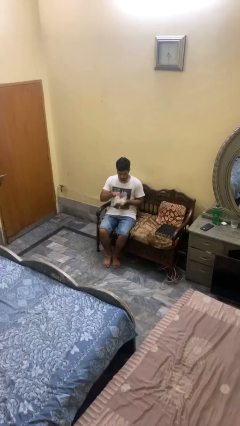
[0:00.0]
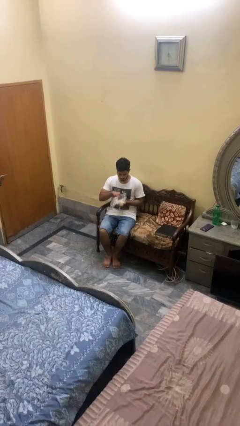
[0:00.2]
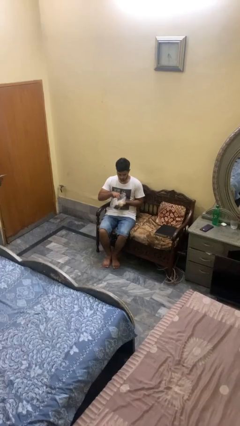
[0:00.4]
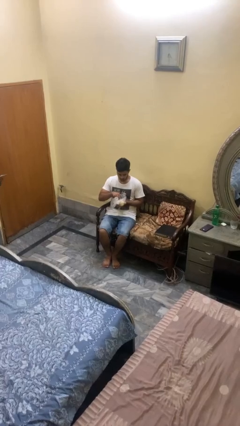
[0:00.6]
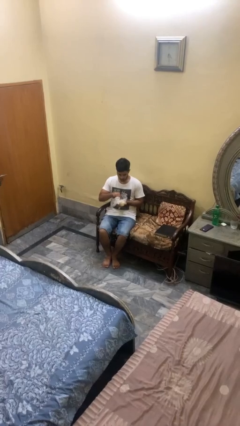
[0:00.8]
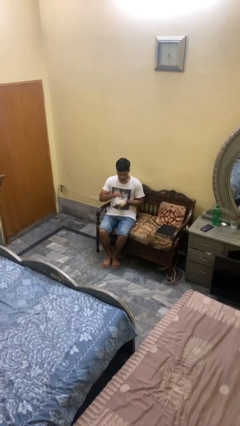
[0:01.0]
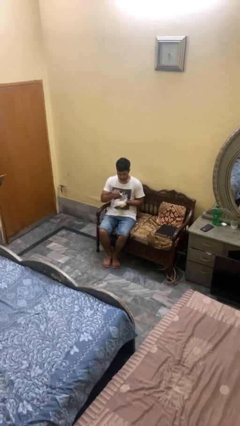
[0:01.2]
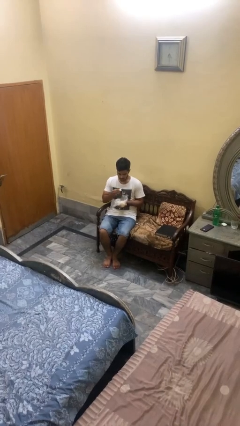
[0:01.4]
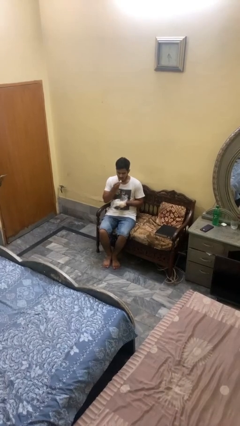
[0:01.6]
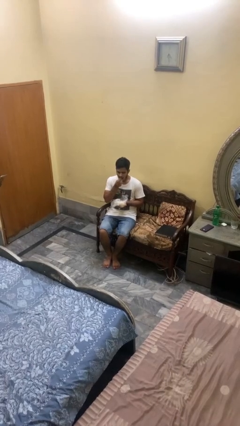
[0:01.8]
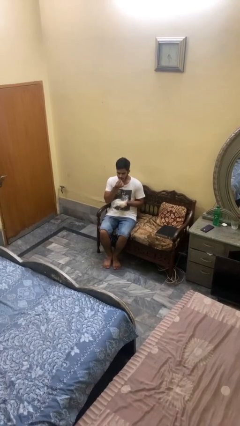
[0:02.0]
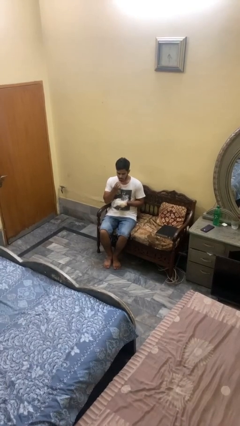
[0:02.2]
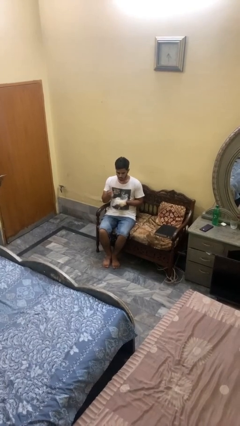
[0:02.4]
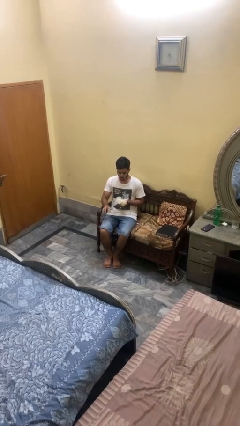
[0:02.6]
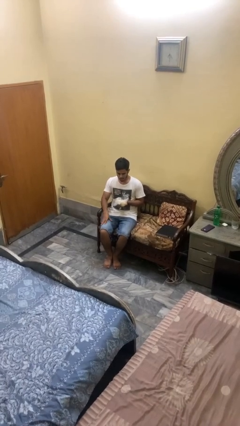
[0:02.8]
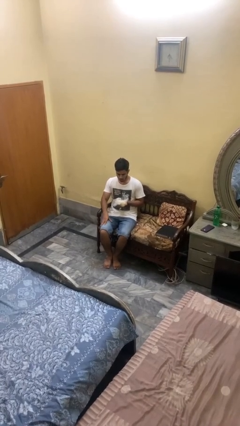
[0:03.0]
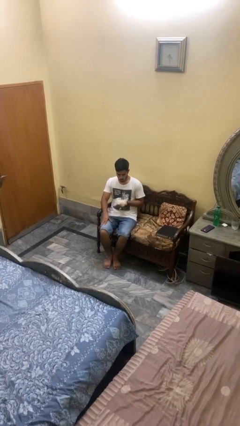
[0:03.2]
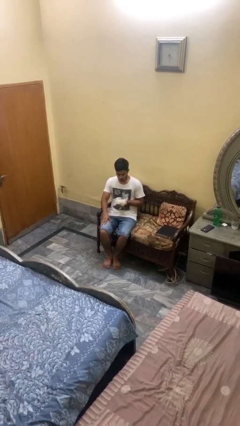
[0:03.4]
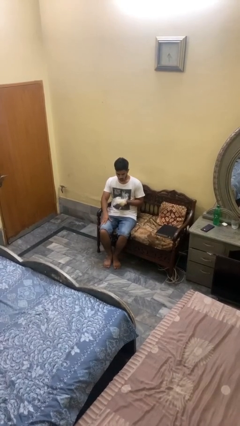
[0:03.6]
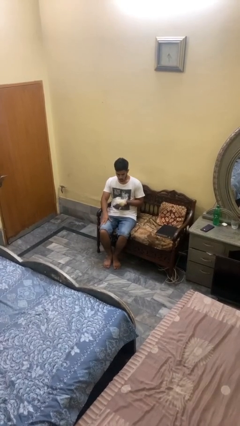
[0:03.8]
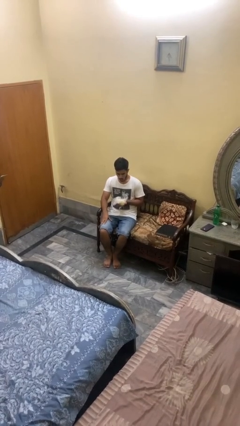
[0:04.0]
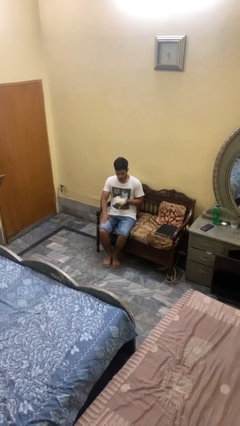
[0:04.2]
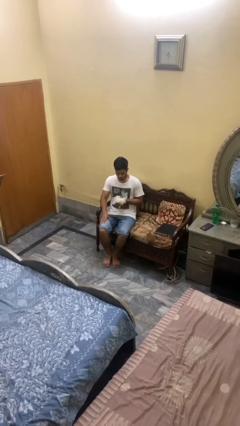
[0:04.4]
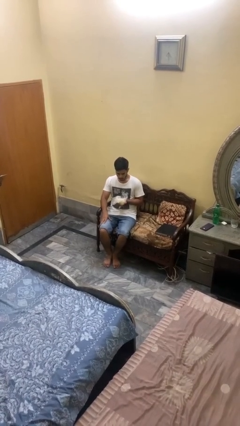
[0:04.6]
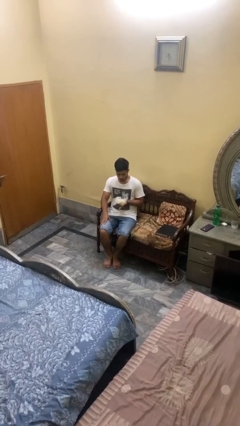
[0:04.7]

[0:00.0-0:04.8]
person eats snack from bag

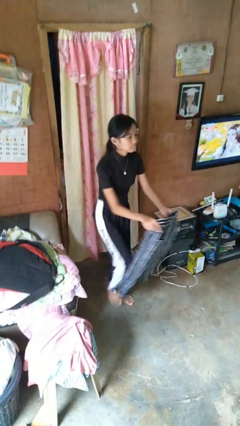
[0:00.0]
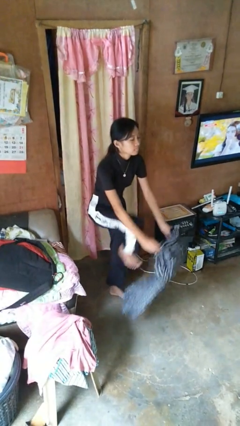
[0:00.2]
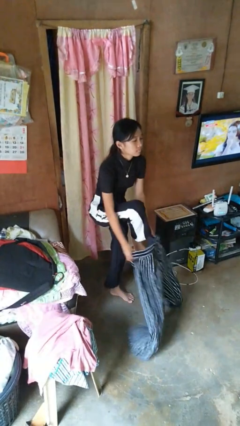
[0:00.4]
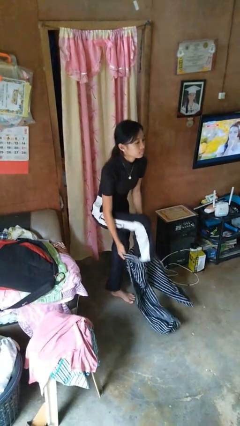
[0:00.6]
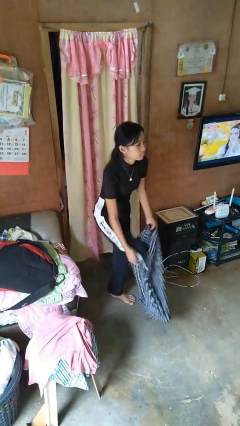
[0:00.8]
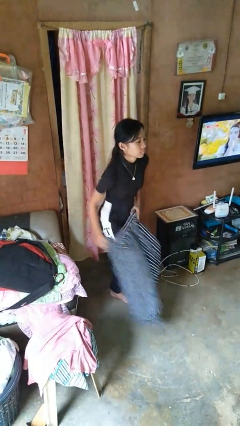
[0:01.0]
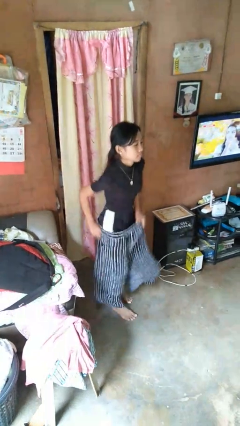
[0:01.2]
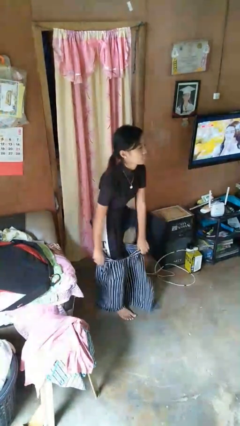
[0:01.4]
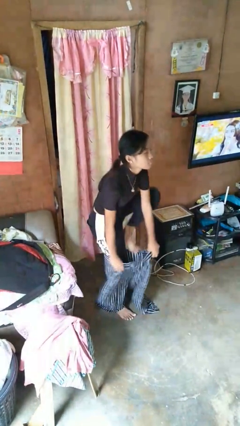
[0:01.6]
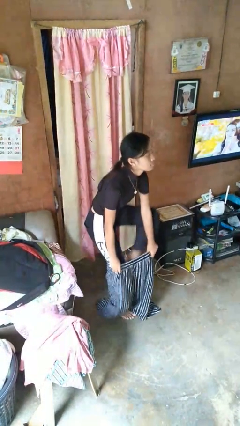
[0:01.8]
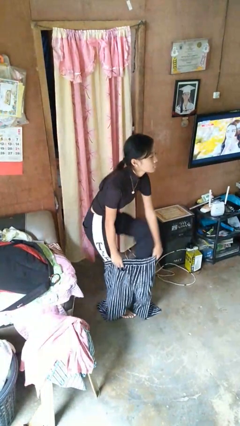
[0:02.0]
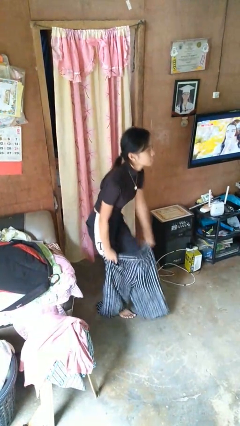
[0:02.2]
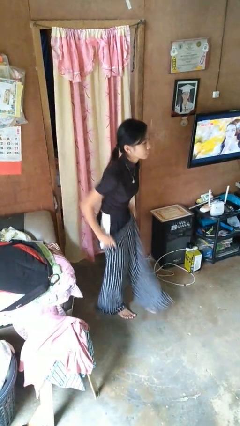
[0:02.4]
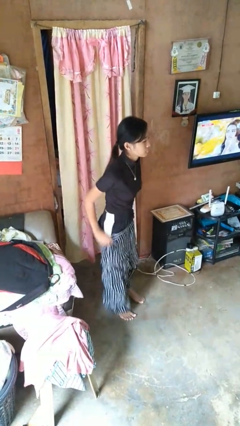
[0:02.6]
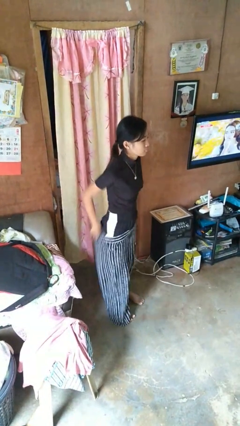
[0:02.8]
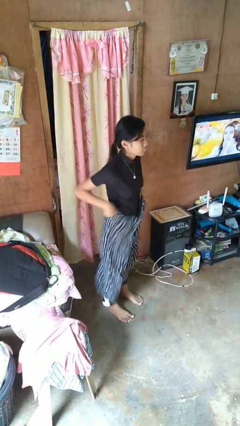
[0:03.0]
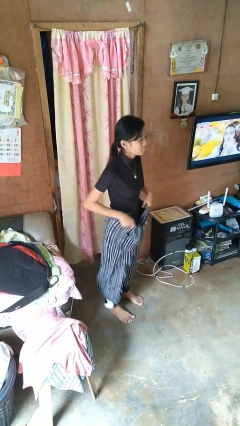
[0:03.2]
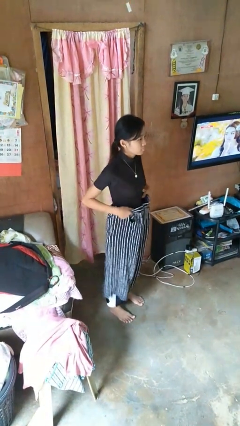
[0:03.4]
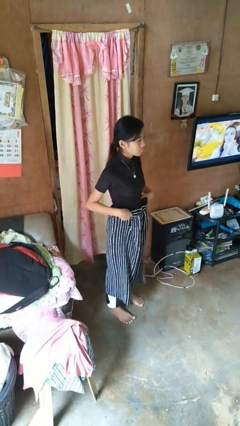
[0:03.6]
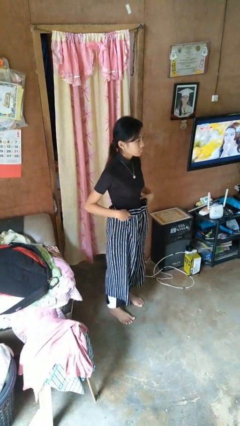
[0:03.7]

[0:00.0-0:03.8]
person puts on pants

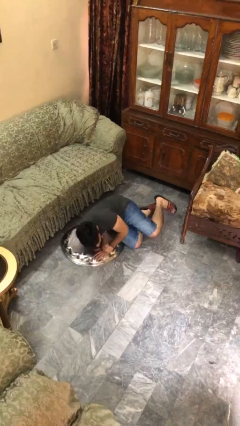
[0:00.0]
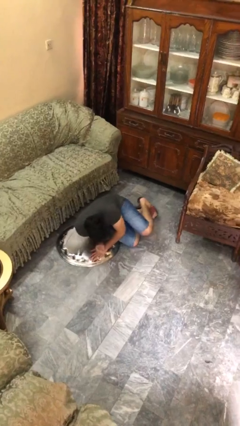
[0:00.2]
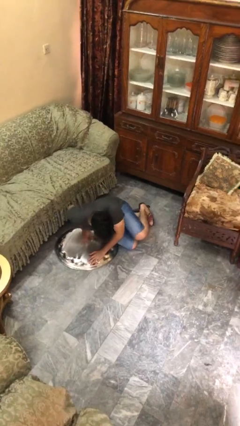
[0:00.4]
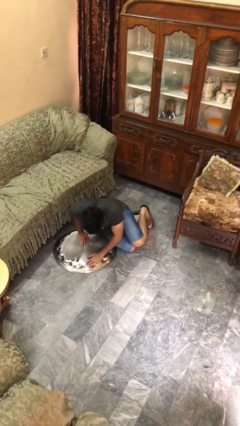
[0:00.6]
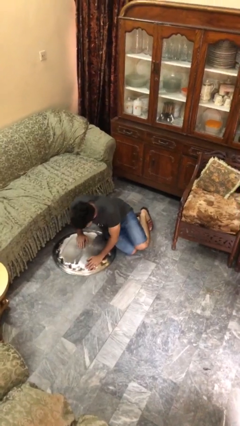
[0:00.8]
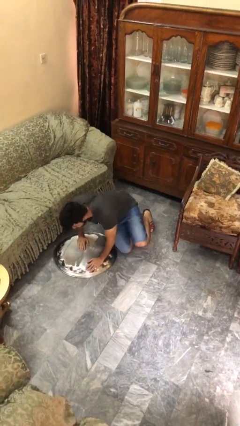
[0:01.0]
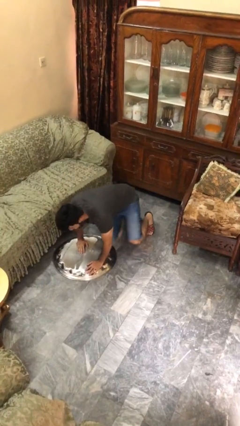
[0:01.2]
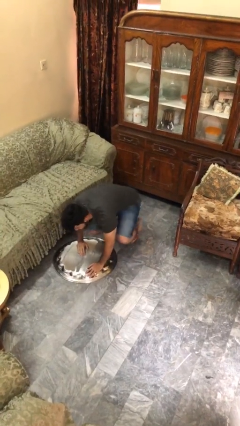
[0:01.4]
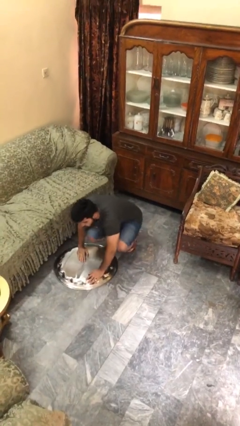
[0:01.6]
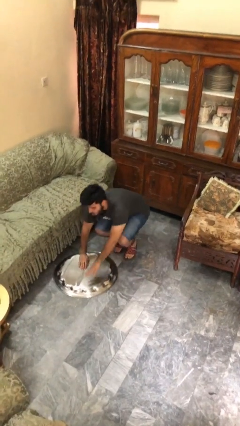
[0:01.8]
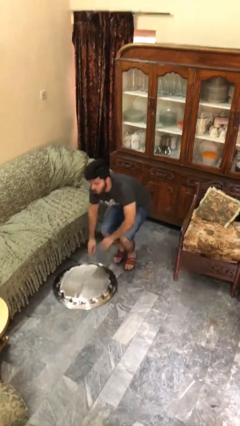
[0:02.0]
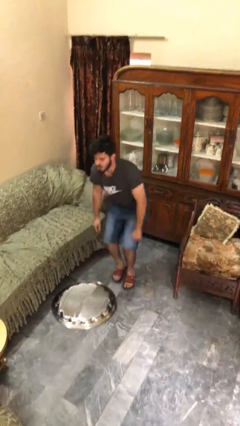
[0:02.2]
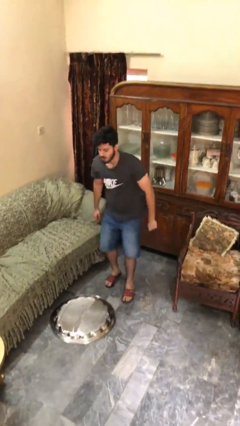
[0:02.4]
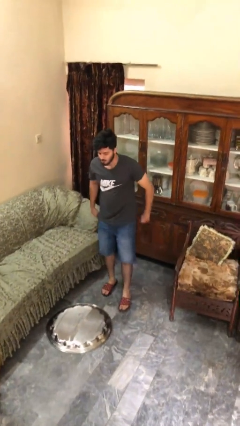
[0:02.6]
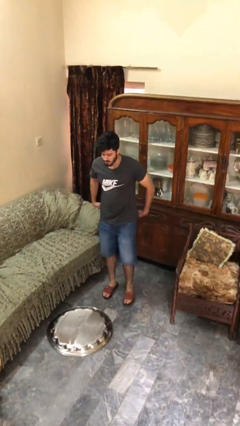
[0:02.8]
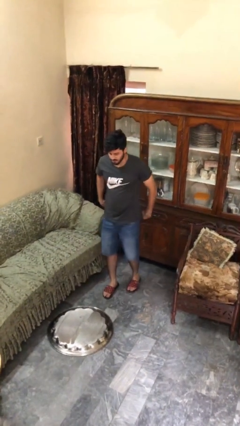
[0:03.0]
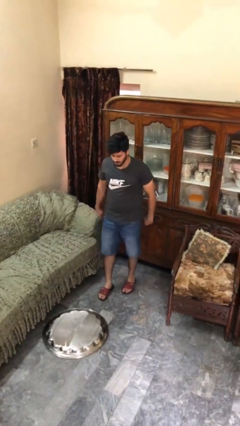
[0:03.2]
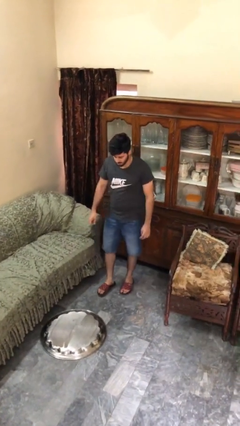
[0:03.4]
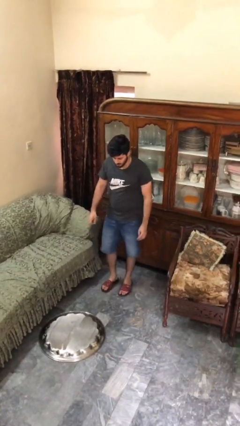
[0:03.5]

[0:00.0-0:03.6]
person stands up from floor

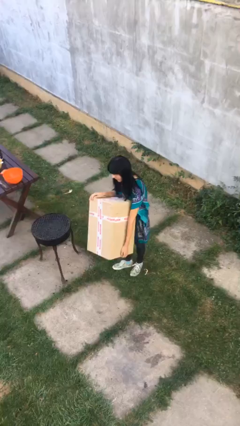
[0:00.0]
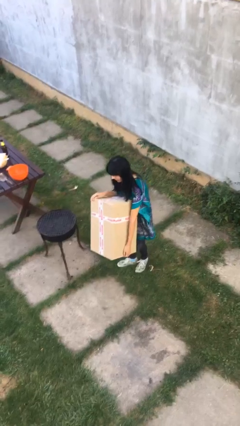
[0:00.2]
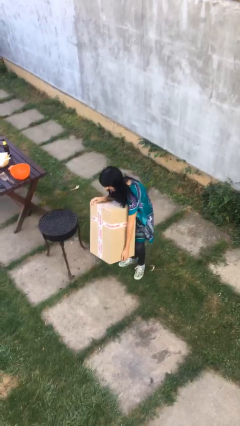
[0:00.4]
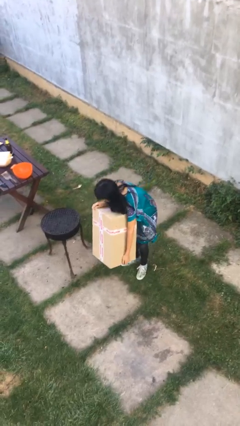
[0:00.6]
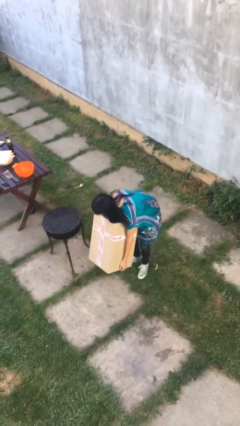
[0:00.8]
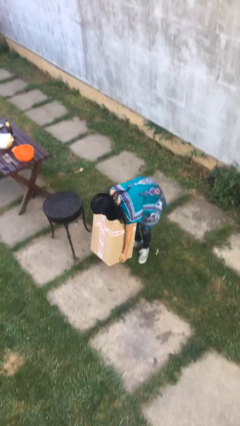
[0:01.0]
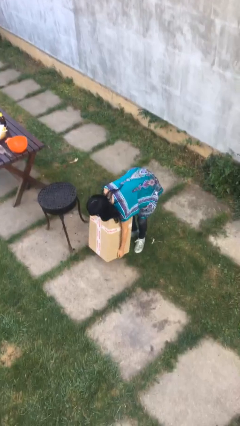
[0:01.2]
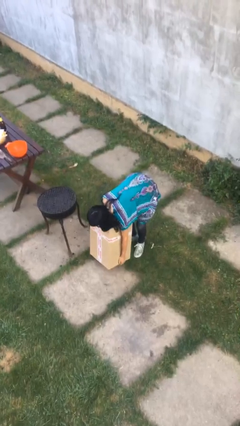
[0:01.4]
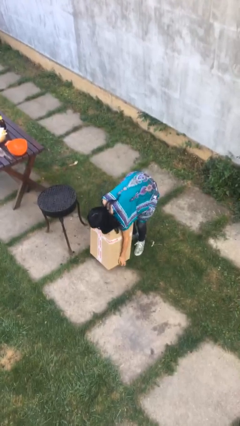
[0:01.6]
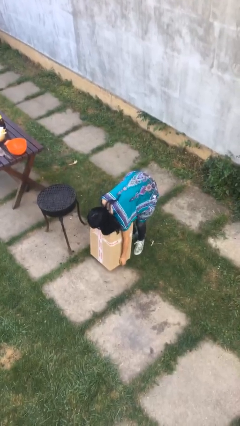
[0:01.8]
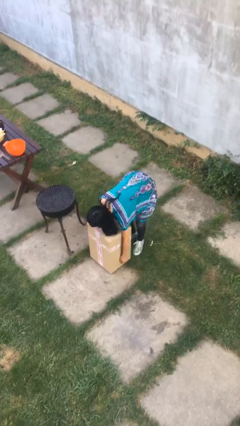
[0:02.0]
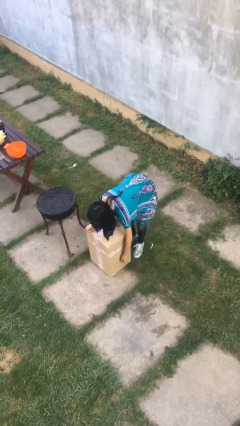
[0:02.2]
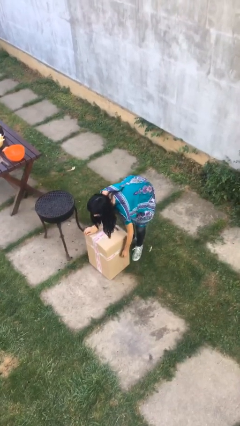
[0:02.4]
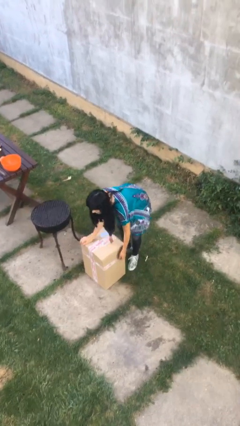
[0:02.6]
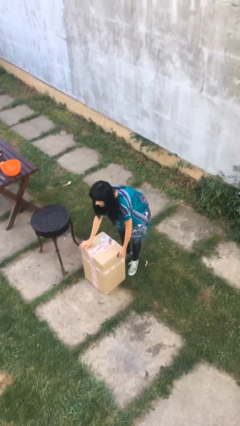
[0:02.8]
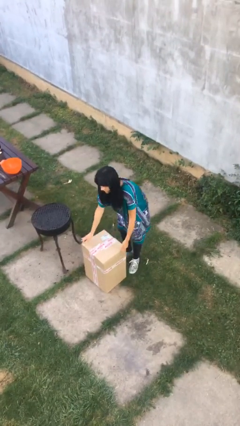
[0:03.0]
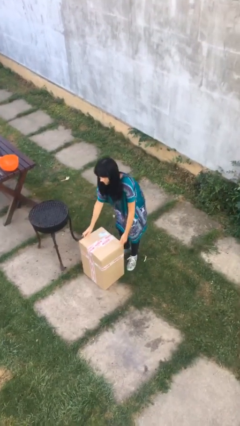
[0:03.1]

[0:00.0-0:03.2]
person puts down object on floor

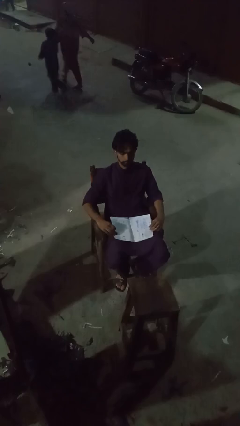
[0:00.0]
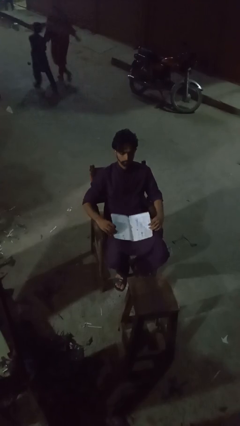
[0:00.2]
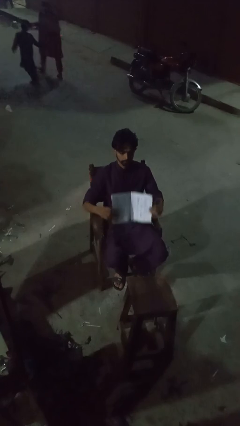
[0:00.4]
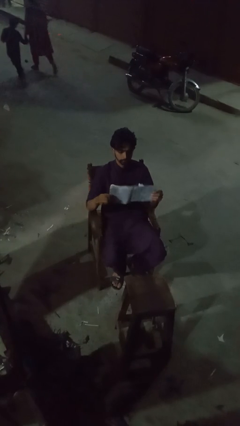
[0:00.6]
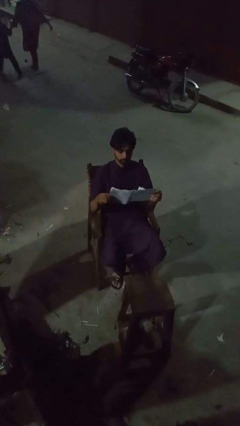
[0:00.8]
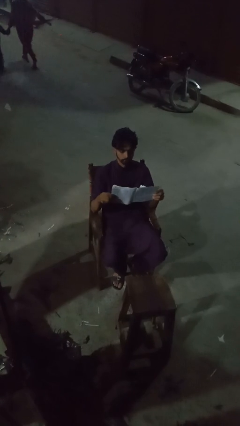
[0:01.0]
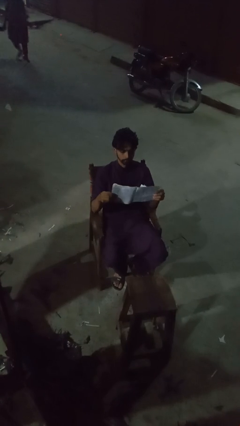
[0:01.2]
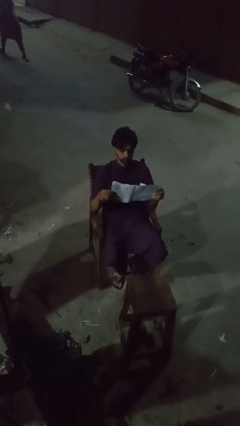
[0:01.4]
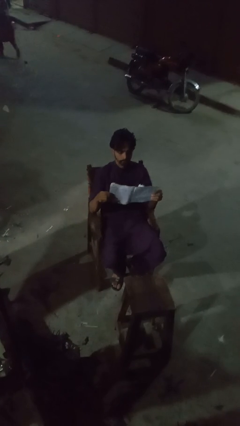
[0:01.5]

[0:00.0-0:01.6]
person reads magazine

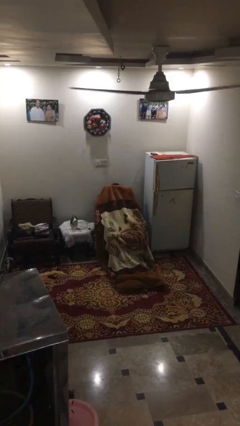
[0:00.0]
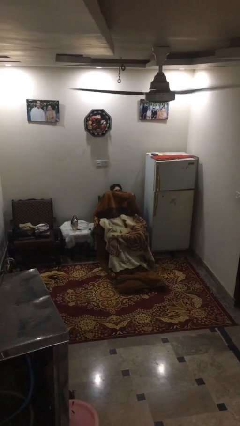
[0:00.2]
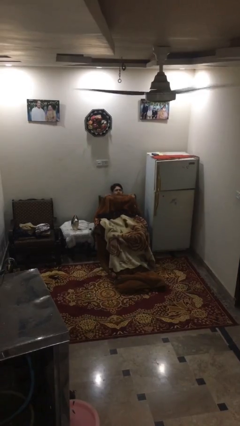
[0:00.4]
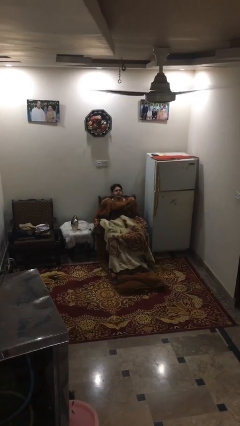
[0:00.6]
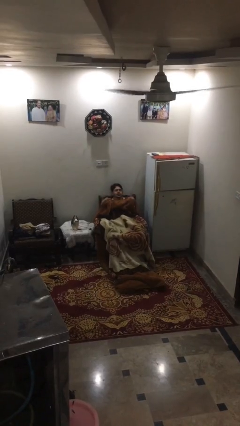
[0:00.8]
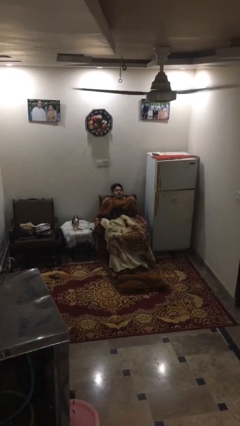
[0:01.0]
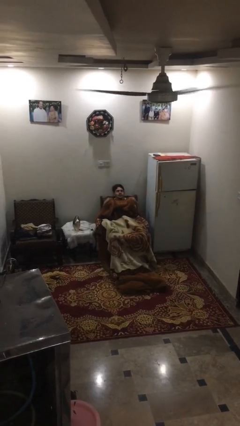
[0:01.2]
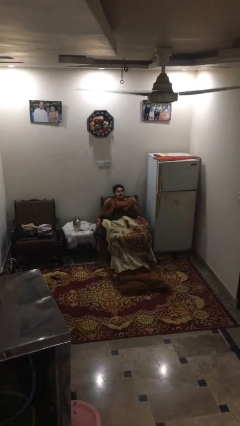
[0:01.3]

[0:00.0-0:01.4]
person uncovers with blanket
